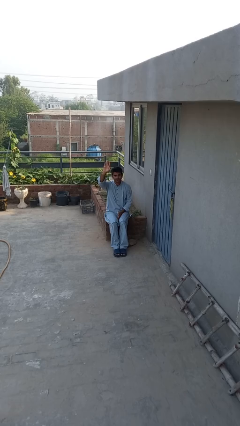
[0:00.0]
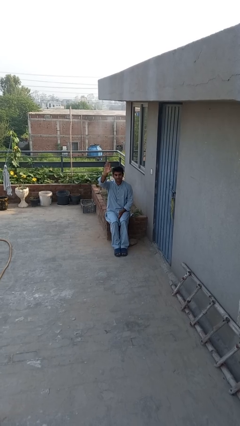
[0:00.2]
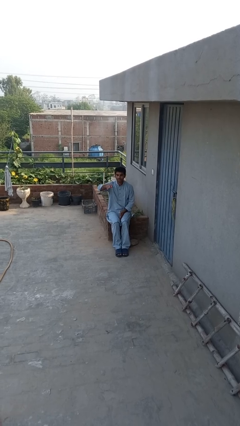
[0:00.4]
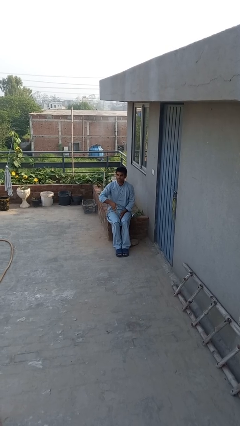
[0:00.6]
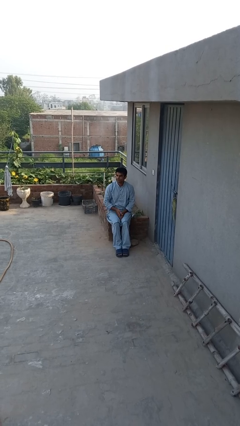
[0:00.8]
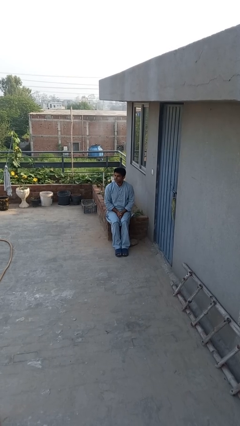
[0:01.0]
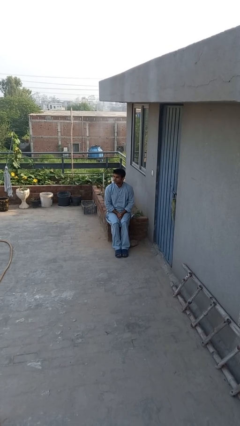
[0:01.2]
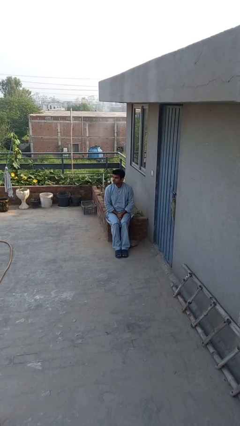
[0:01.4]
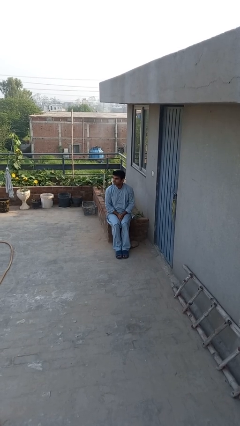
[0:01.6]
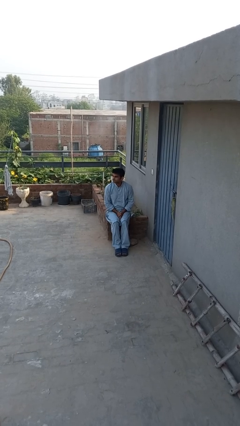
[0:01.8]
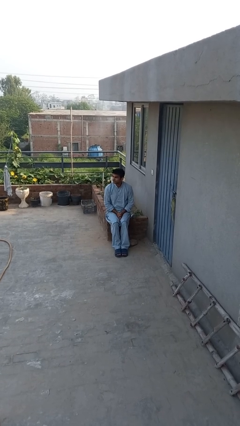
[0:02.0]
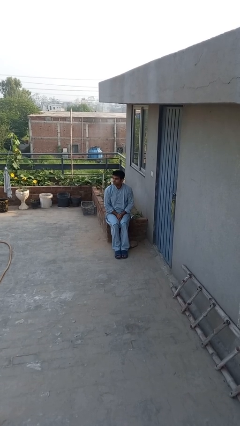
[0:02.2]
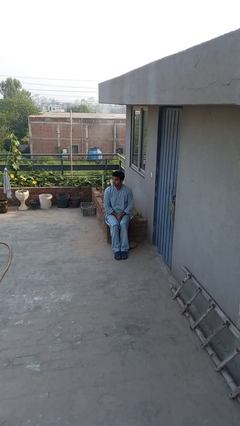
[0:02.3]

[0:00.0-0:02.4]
person gestures lower hand

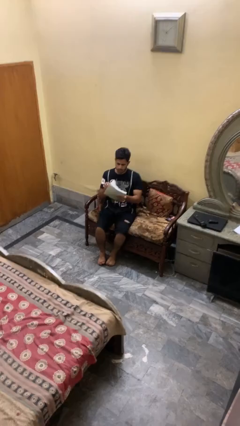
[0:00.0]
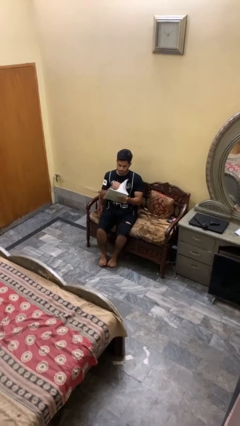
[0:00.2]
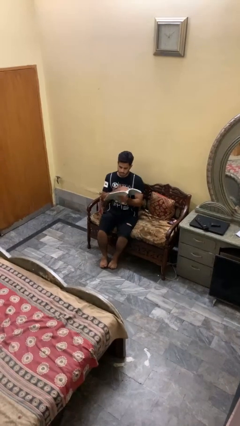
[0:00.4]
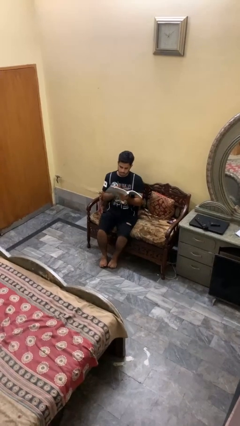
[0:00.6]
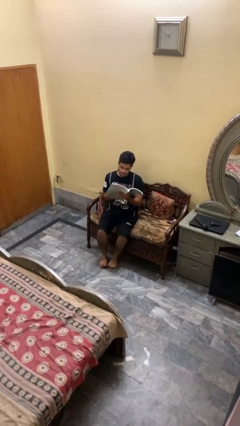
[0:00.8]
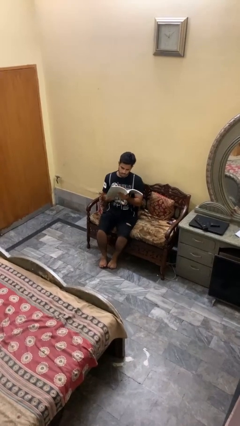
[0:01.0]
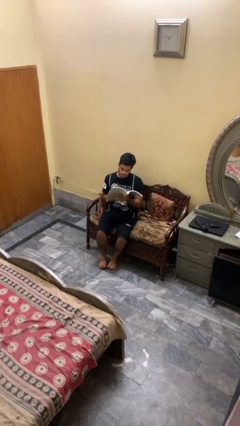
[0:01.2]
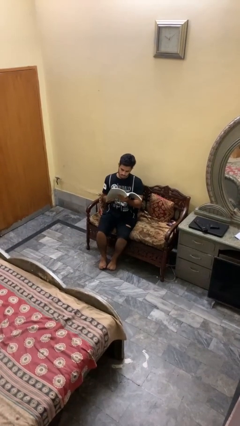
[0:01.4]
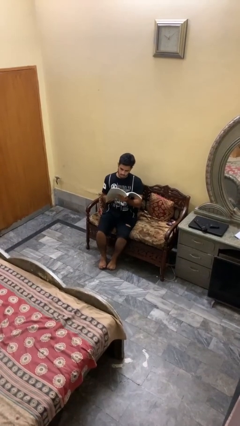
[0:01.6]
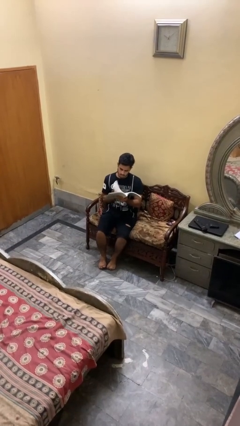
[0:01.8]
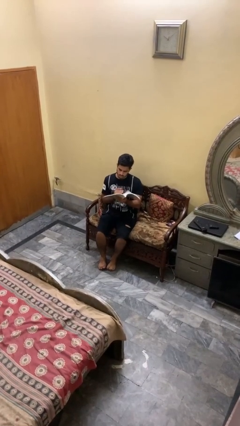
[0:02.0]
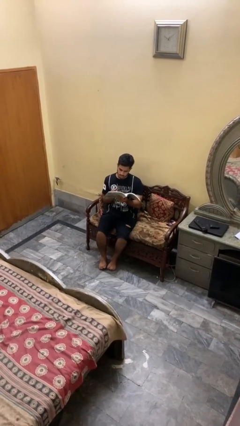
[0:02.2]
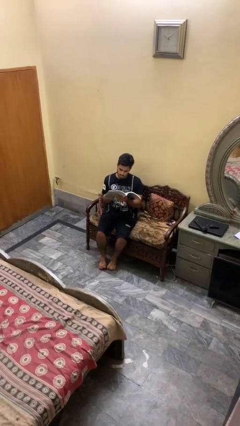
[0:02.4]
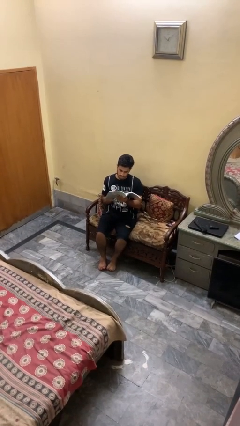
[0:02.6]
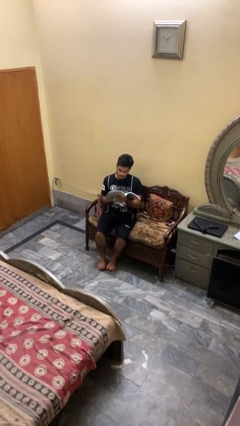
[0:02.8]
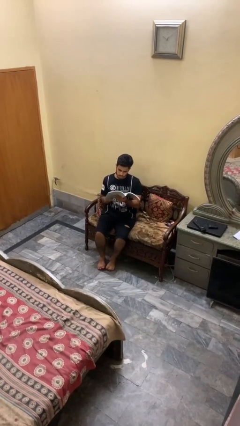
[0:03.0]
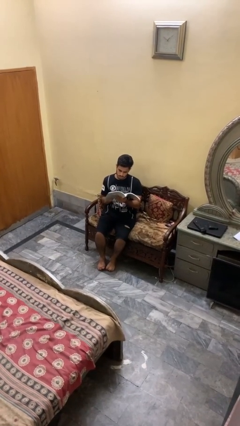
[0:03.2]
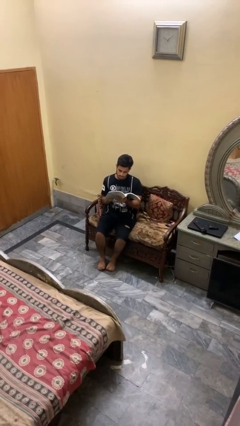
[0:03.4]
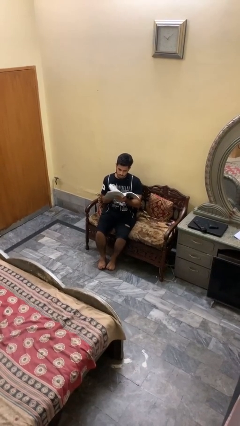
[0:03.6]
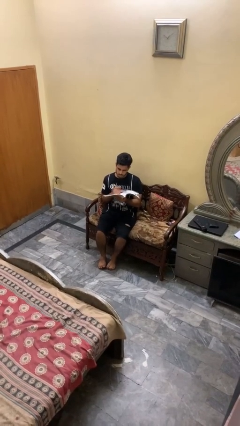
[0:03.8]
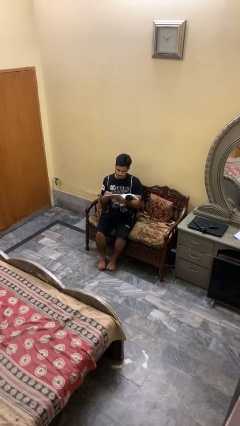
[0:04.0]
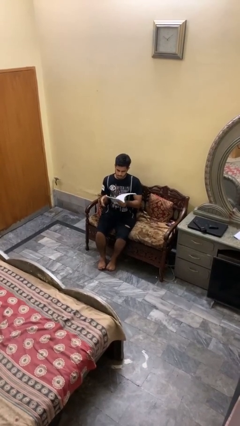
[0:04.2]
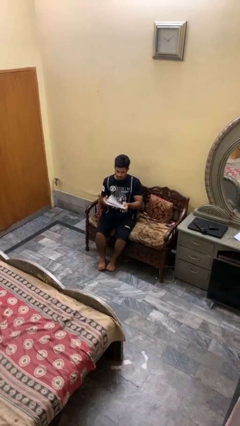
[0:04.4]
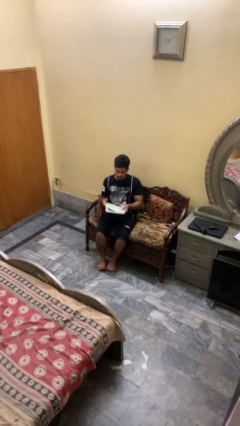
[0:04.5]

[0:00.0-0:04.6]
person reads book

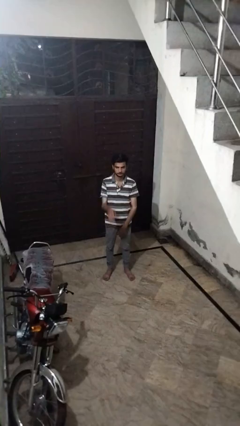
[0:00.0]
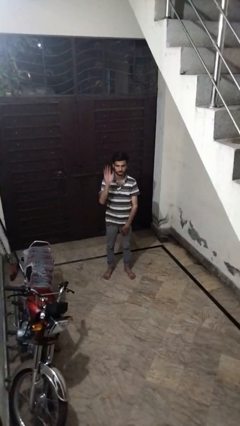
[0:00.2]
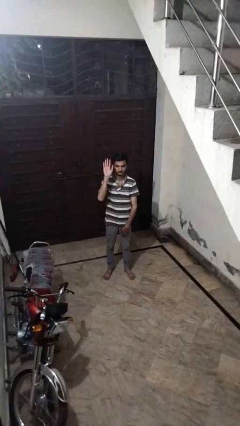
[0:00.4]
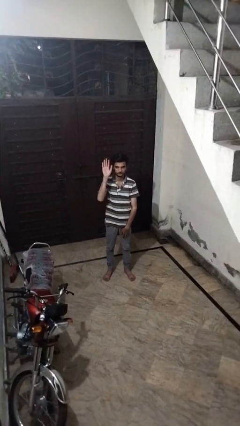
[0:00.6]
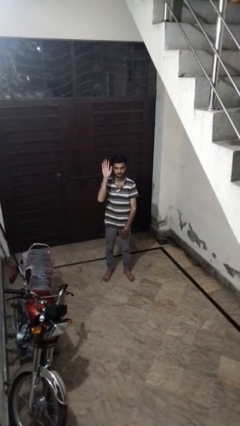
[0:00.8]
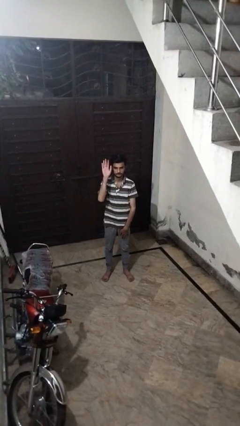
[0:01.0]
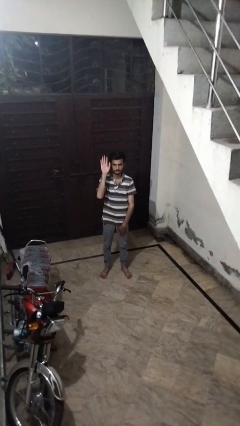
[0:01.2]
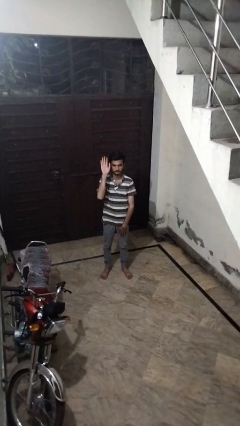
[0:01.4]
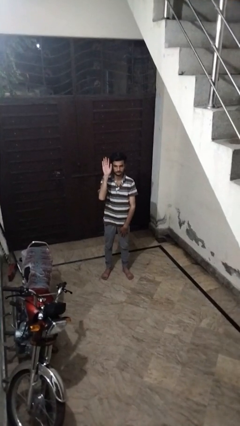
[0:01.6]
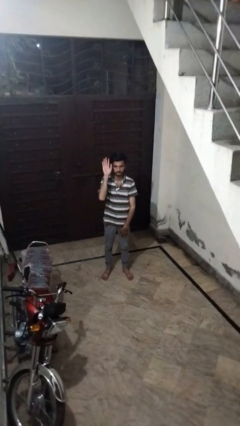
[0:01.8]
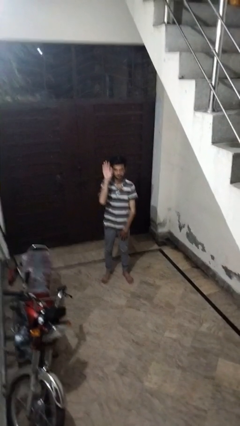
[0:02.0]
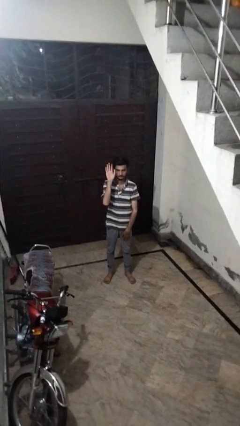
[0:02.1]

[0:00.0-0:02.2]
person gestures raise hand

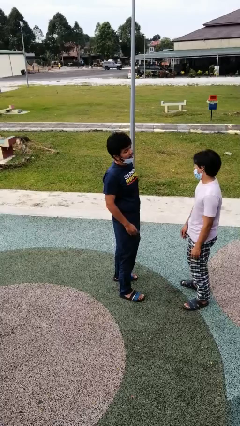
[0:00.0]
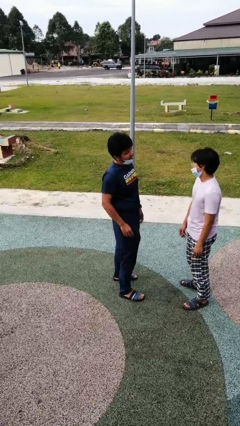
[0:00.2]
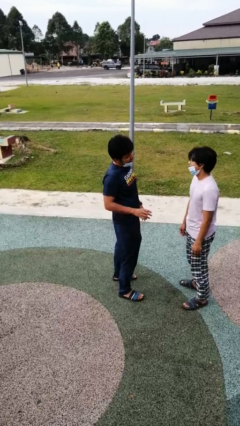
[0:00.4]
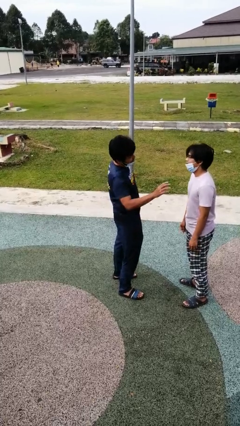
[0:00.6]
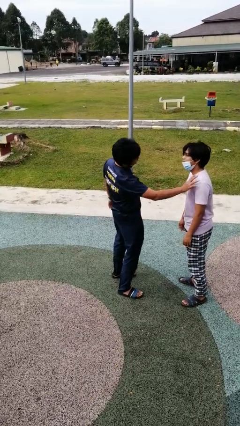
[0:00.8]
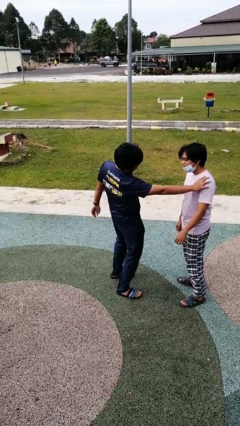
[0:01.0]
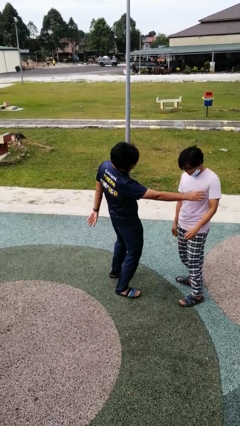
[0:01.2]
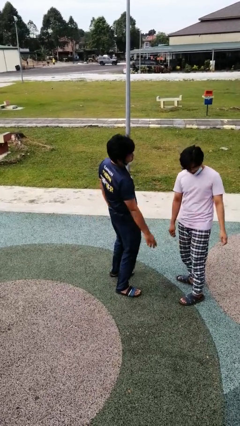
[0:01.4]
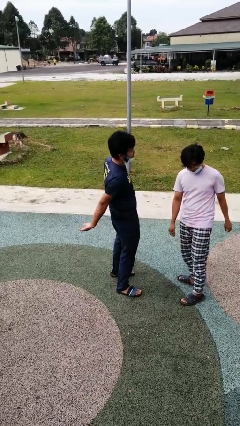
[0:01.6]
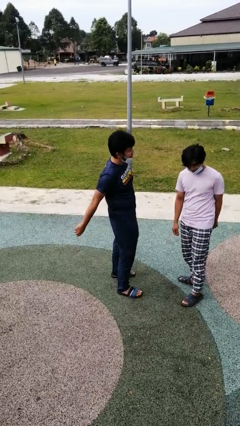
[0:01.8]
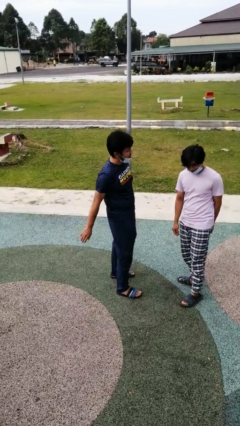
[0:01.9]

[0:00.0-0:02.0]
person shoves person

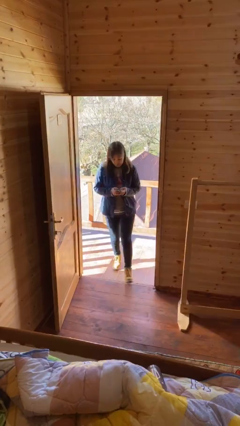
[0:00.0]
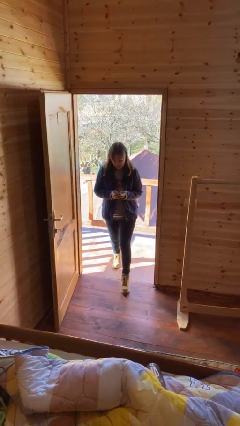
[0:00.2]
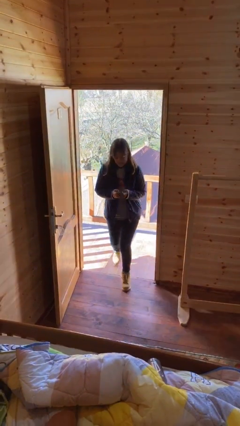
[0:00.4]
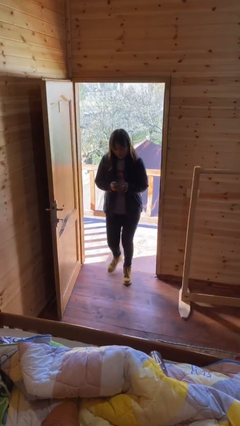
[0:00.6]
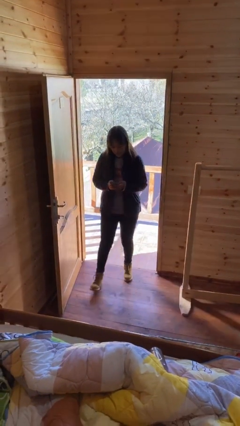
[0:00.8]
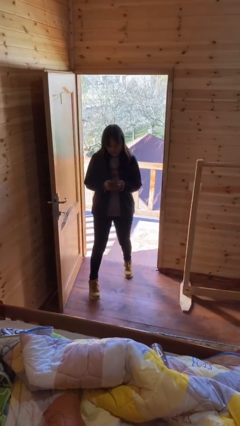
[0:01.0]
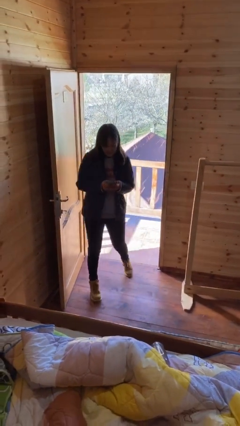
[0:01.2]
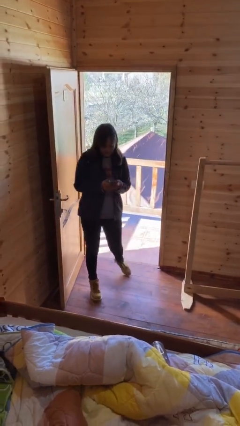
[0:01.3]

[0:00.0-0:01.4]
person enters scene through structure

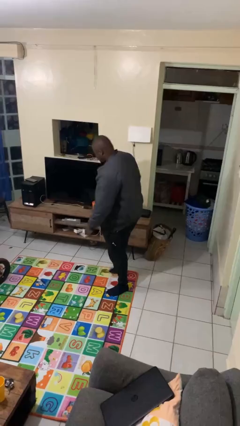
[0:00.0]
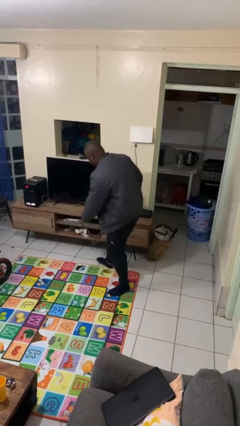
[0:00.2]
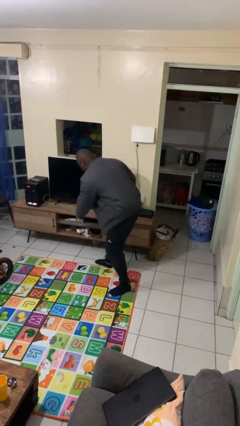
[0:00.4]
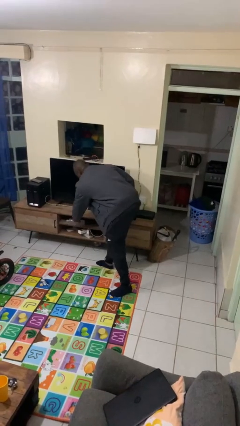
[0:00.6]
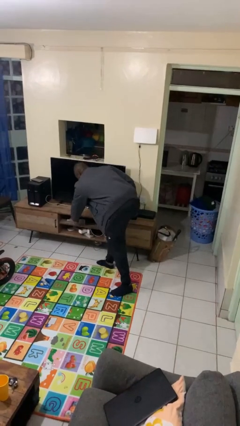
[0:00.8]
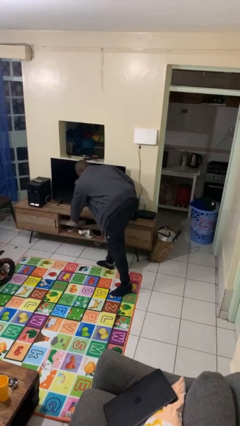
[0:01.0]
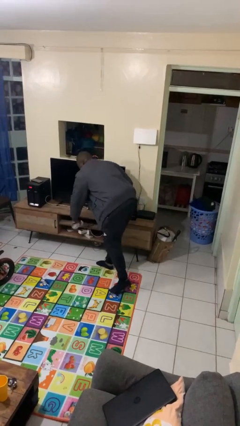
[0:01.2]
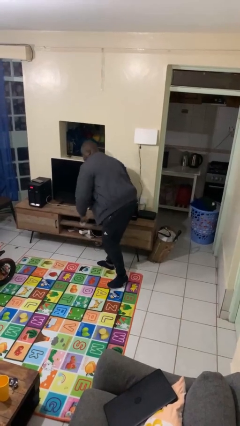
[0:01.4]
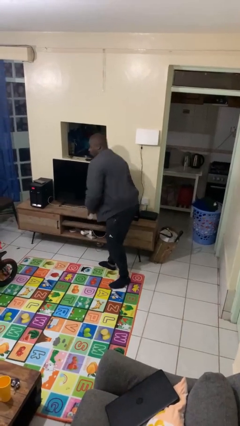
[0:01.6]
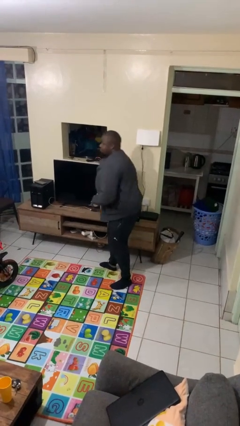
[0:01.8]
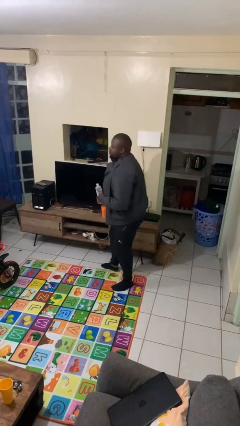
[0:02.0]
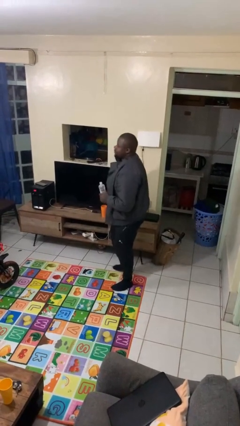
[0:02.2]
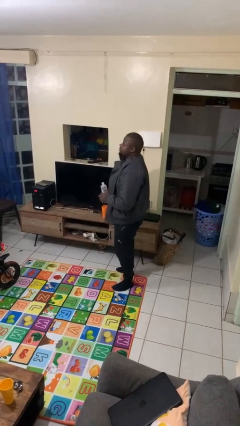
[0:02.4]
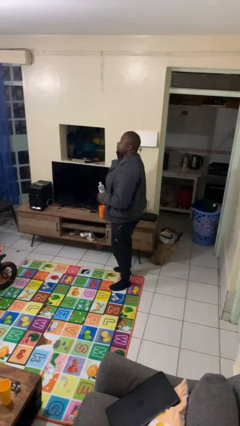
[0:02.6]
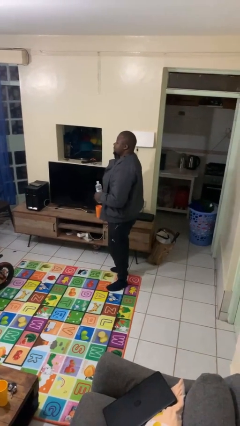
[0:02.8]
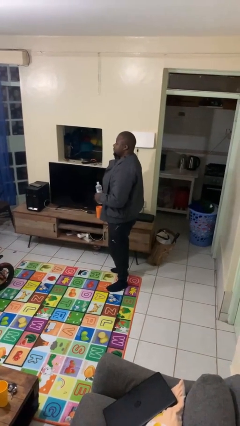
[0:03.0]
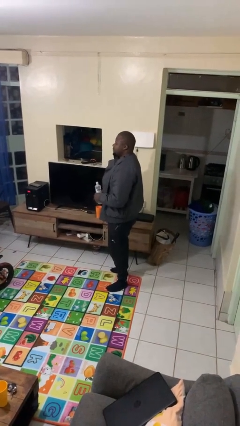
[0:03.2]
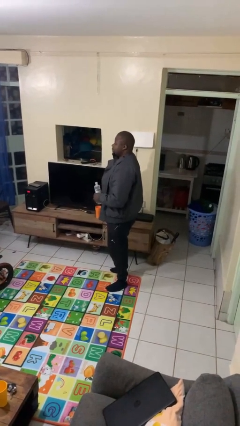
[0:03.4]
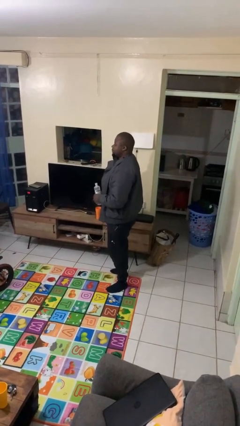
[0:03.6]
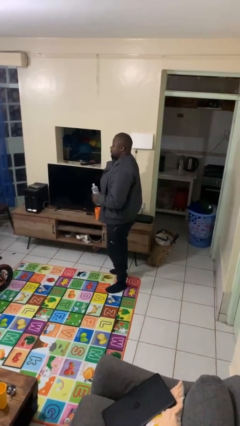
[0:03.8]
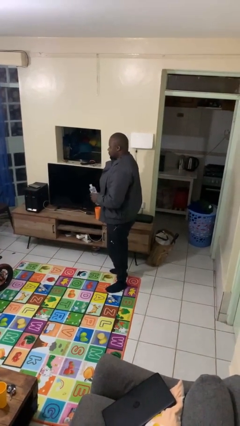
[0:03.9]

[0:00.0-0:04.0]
person picks up object from cabinet

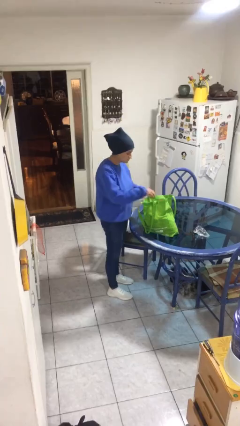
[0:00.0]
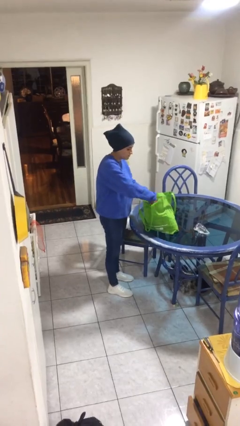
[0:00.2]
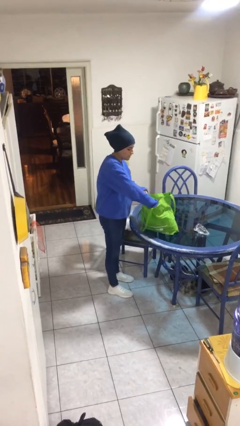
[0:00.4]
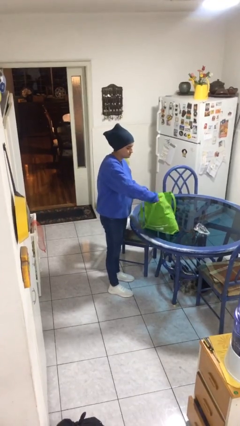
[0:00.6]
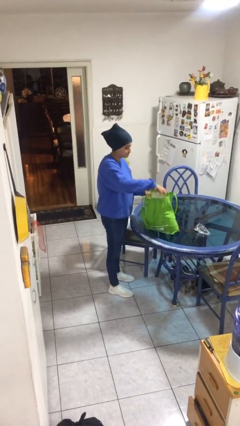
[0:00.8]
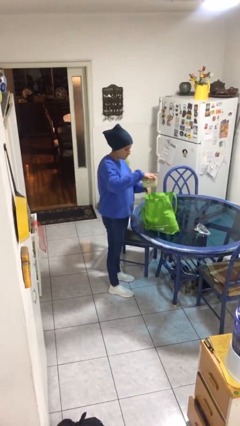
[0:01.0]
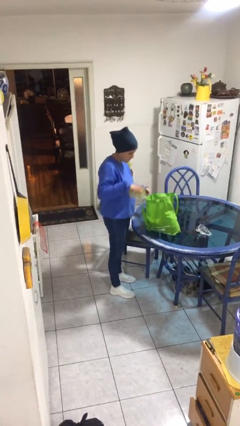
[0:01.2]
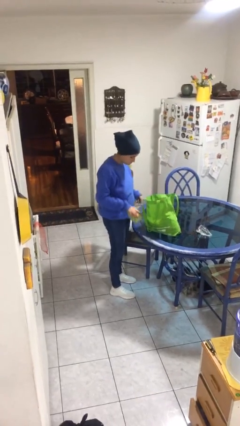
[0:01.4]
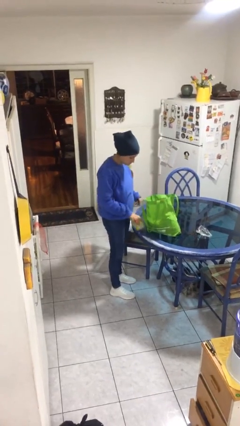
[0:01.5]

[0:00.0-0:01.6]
person takes object from bag
